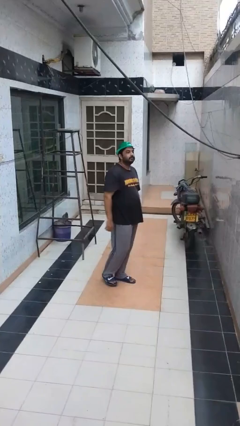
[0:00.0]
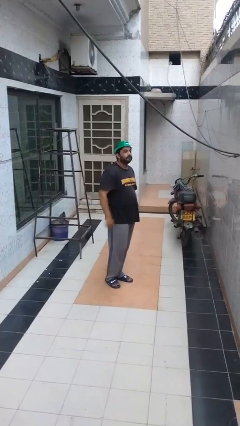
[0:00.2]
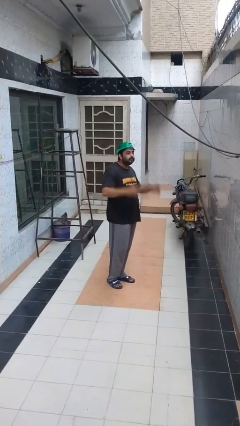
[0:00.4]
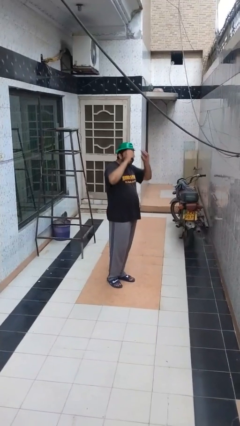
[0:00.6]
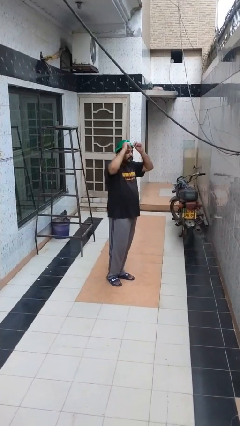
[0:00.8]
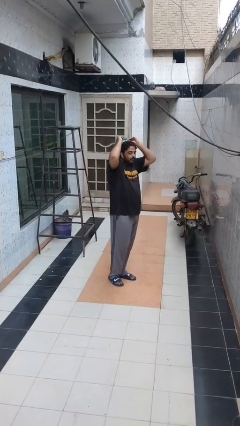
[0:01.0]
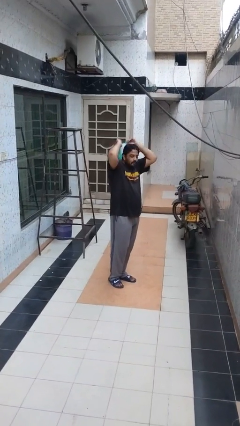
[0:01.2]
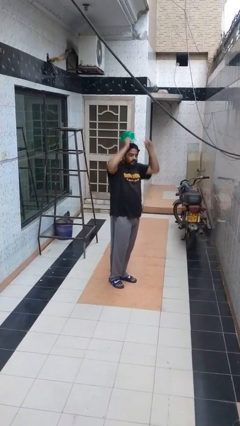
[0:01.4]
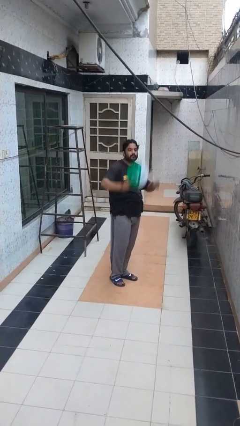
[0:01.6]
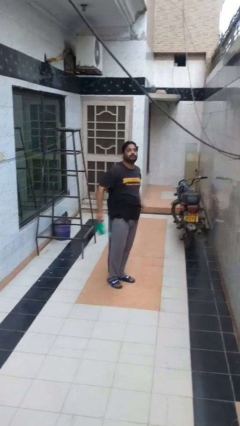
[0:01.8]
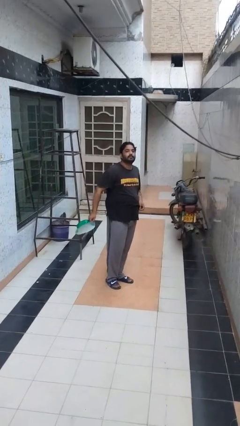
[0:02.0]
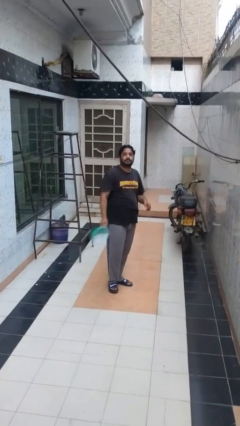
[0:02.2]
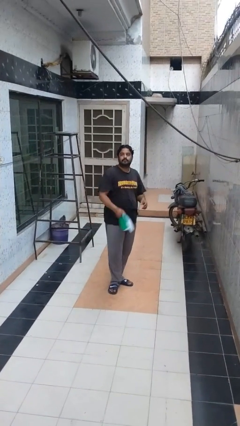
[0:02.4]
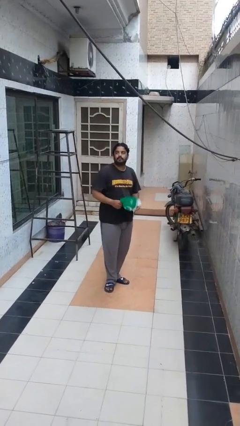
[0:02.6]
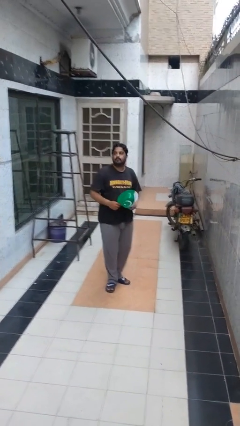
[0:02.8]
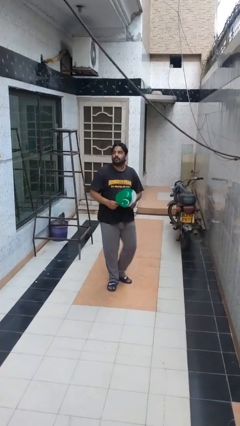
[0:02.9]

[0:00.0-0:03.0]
person takes off hat

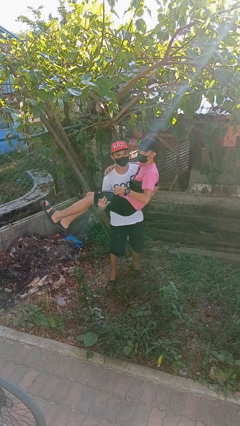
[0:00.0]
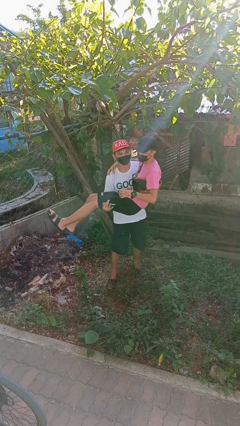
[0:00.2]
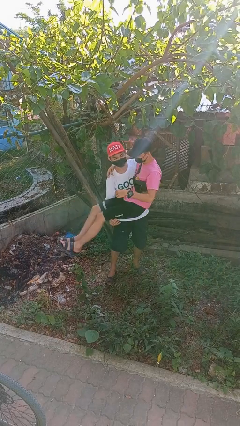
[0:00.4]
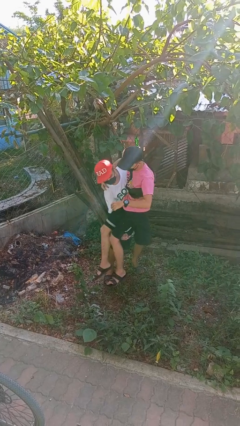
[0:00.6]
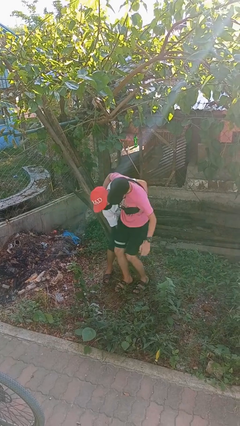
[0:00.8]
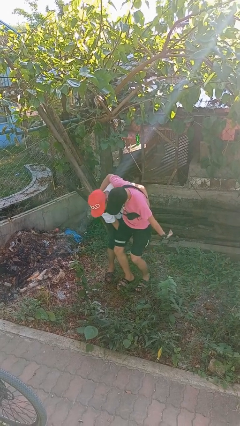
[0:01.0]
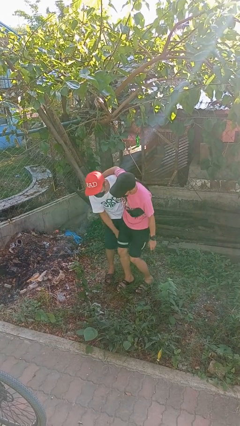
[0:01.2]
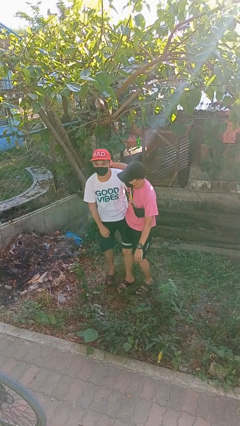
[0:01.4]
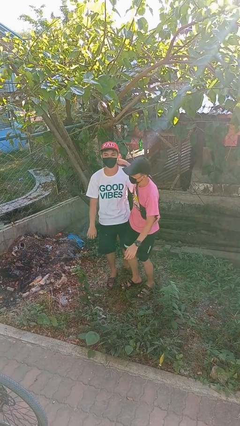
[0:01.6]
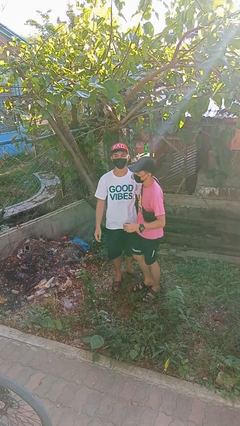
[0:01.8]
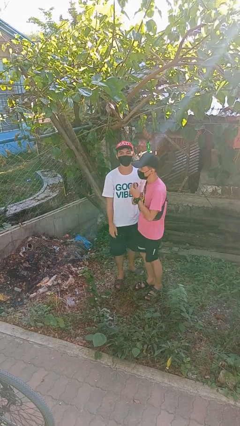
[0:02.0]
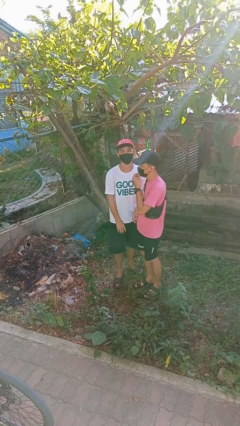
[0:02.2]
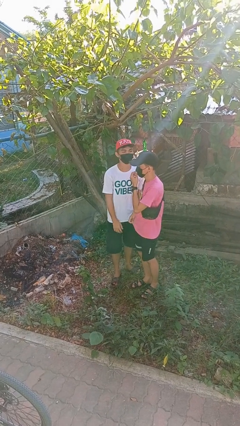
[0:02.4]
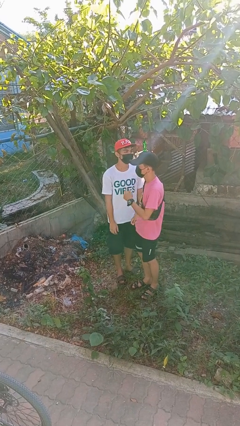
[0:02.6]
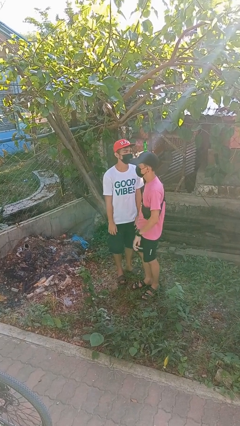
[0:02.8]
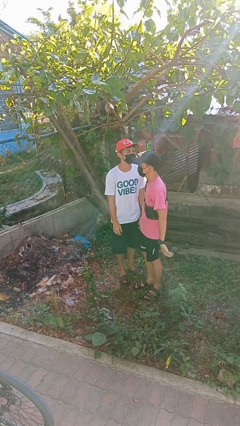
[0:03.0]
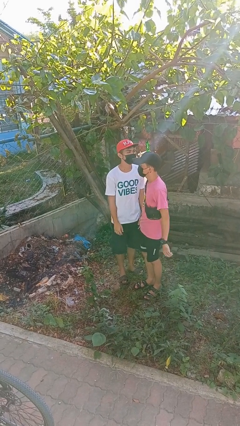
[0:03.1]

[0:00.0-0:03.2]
person puts down person

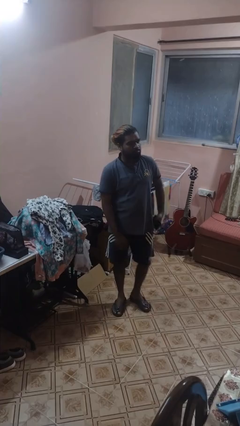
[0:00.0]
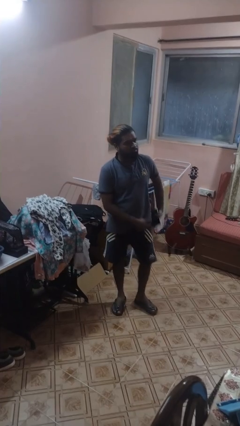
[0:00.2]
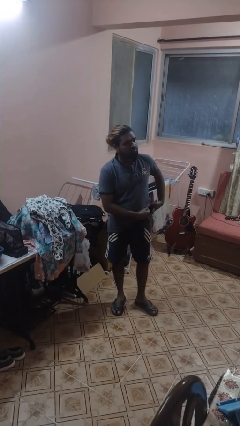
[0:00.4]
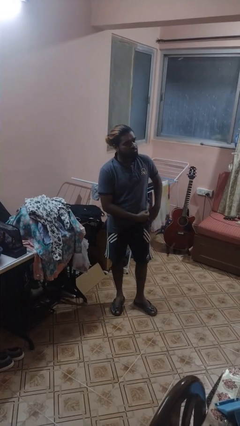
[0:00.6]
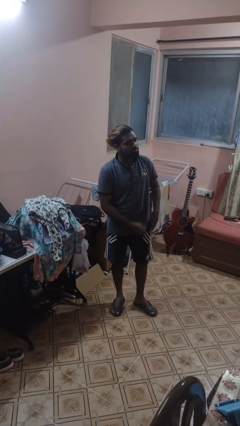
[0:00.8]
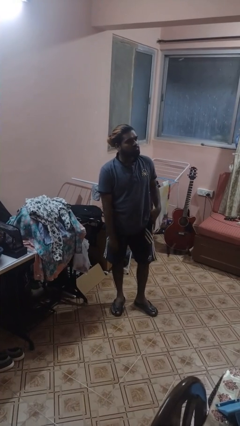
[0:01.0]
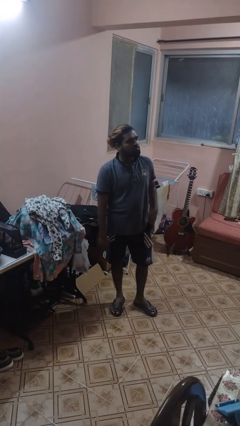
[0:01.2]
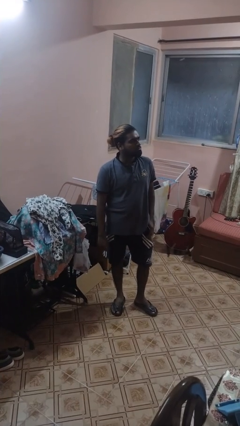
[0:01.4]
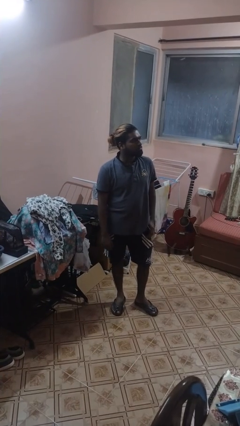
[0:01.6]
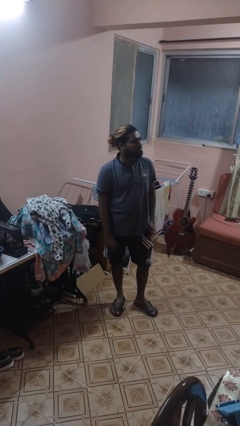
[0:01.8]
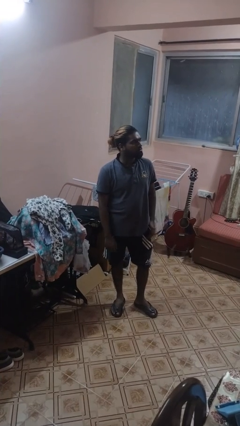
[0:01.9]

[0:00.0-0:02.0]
person puts phone into pocket

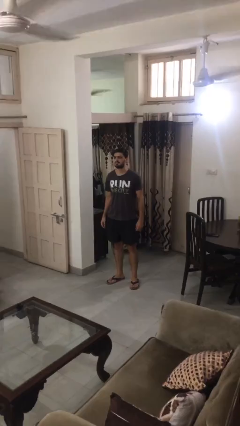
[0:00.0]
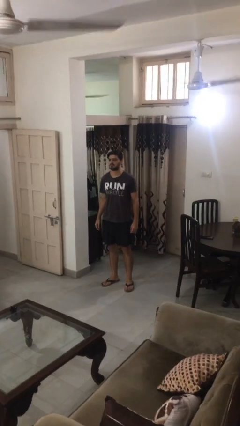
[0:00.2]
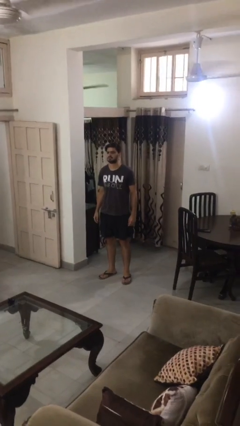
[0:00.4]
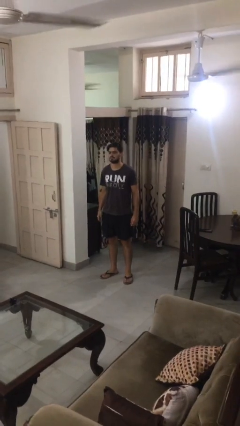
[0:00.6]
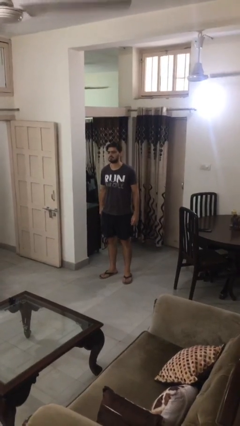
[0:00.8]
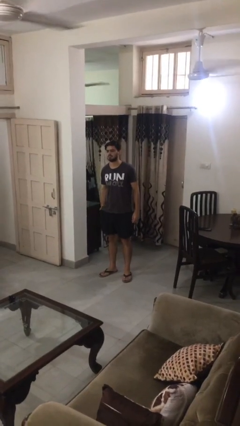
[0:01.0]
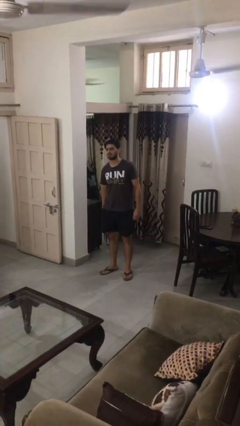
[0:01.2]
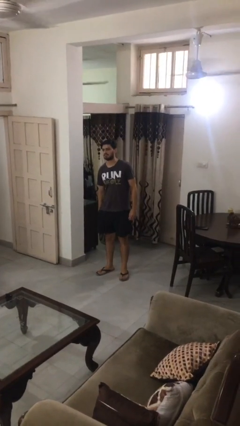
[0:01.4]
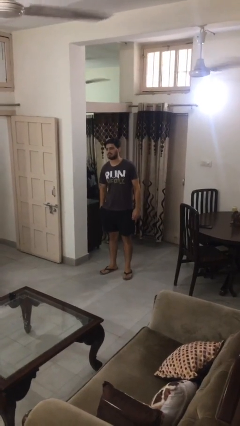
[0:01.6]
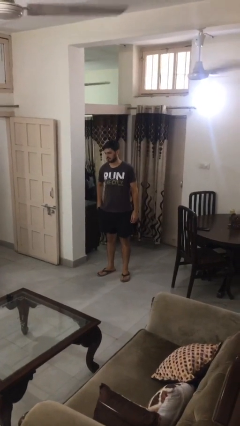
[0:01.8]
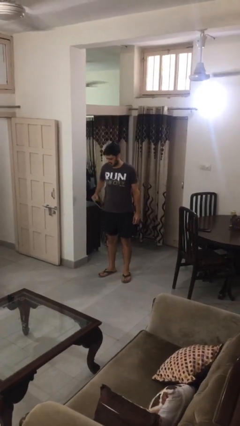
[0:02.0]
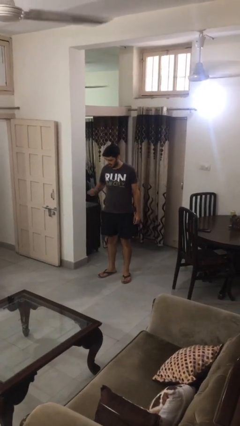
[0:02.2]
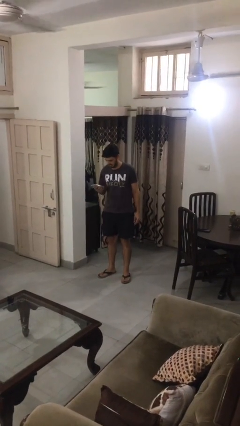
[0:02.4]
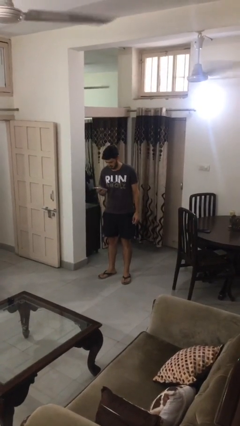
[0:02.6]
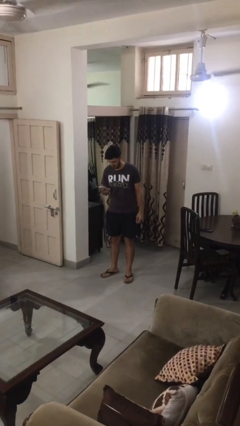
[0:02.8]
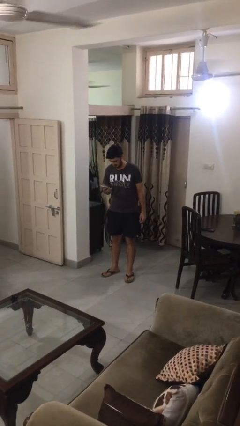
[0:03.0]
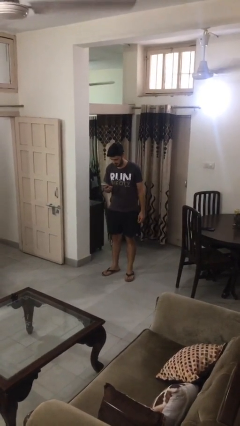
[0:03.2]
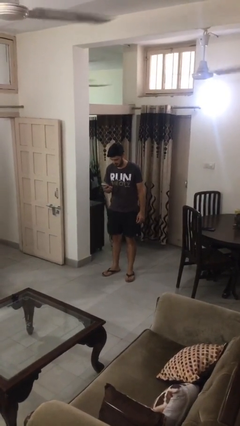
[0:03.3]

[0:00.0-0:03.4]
person takes phone from pocket

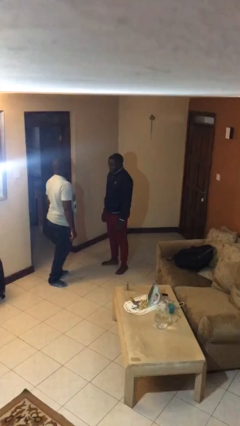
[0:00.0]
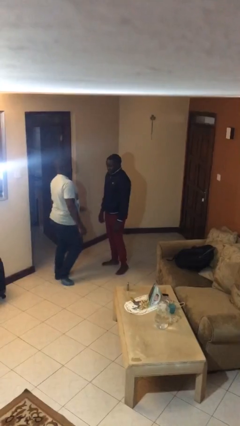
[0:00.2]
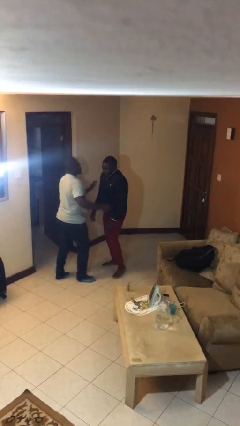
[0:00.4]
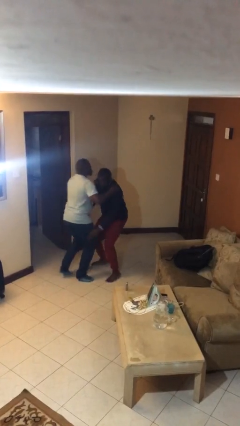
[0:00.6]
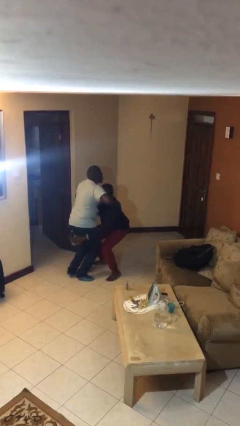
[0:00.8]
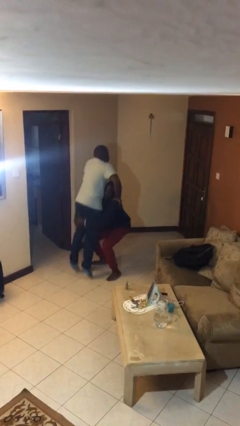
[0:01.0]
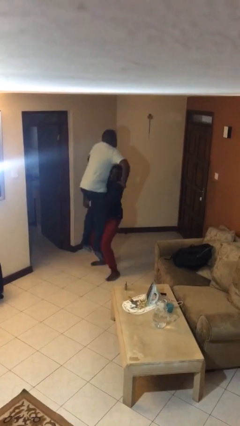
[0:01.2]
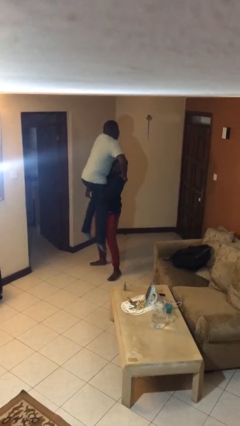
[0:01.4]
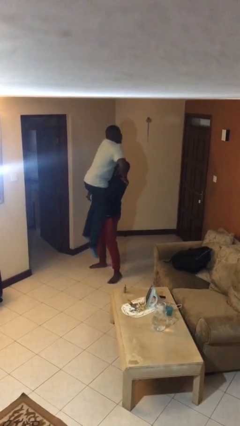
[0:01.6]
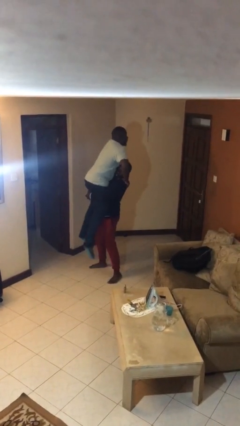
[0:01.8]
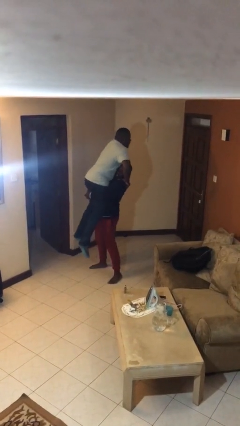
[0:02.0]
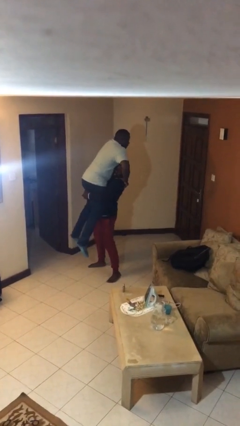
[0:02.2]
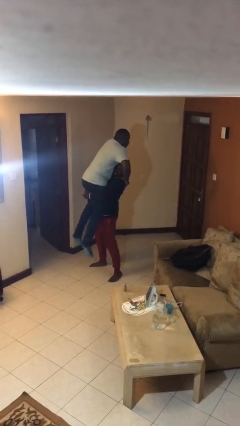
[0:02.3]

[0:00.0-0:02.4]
person picks up person

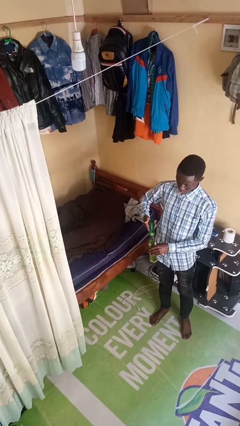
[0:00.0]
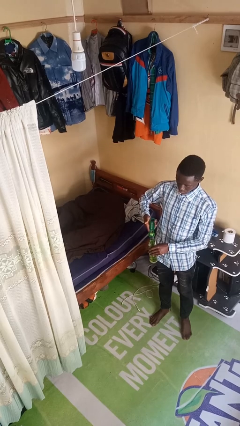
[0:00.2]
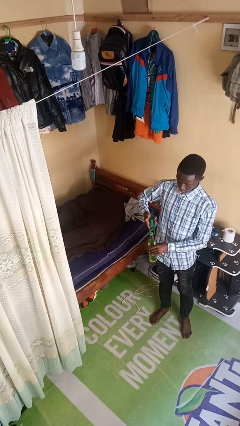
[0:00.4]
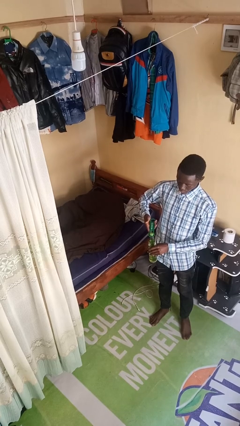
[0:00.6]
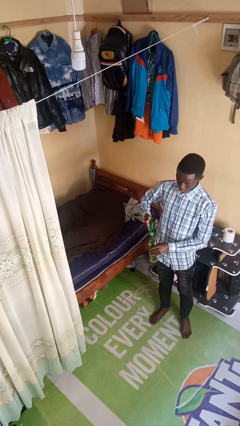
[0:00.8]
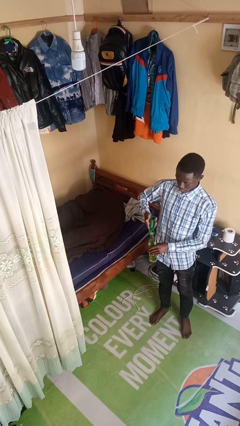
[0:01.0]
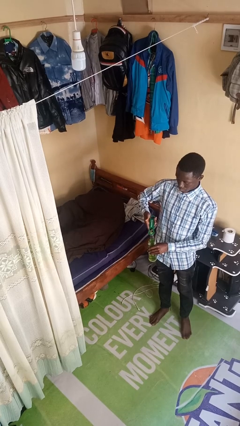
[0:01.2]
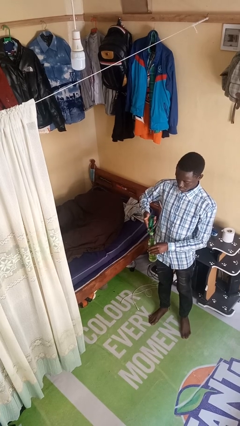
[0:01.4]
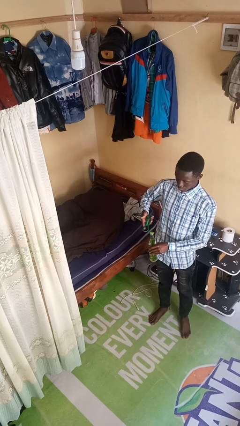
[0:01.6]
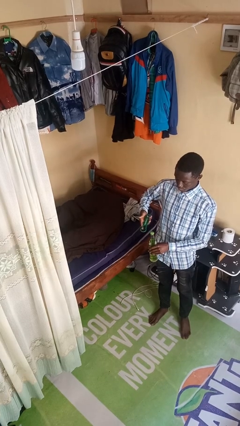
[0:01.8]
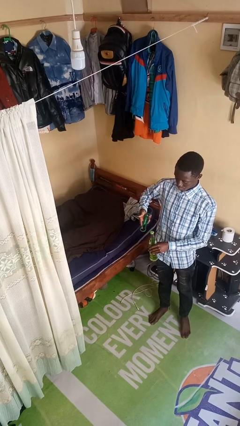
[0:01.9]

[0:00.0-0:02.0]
person opens can with can opener

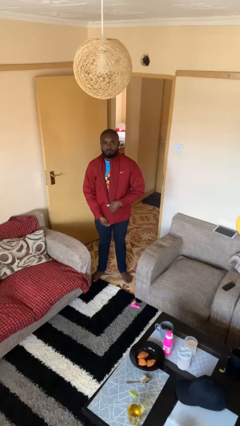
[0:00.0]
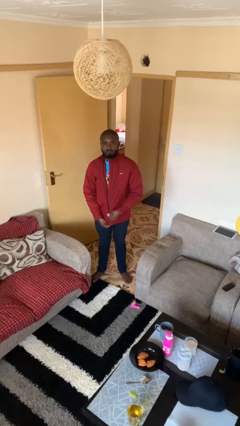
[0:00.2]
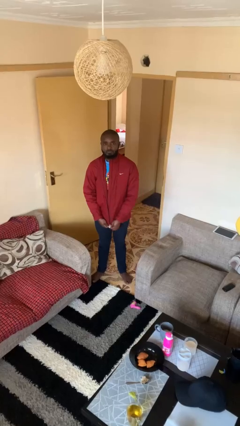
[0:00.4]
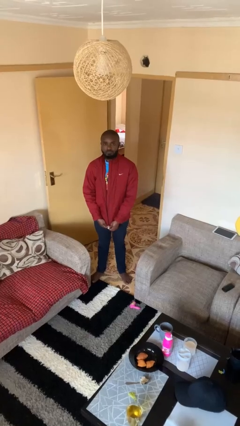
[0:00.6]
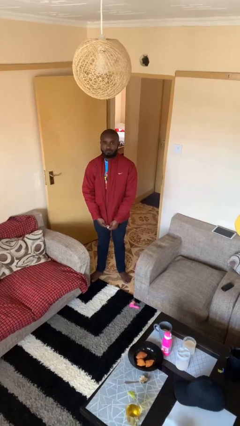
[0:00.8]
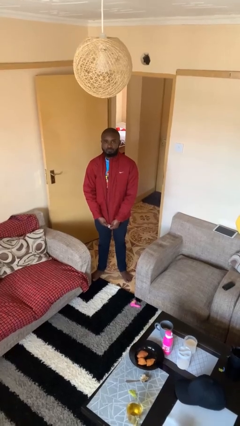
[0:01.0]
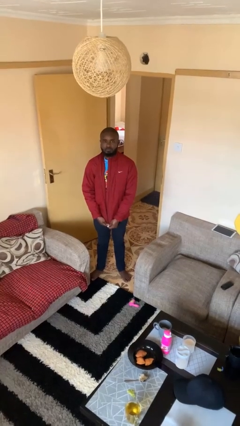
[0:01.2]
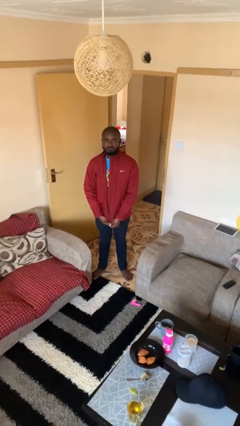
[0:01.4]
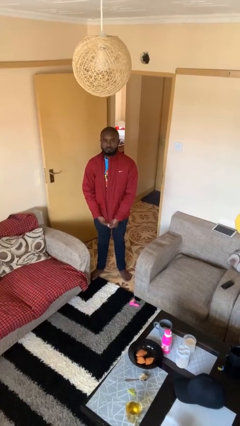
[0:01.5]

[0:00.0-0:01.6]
person unzips jacket
